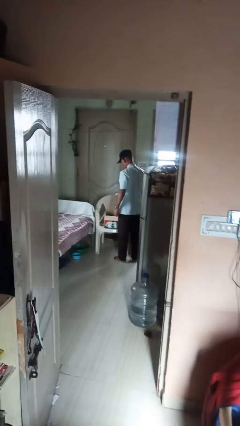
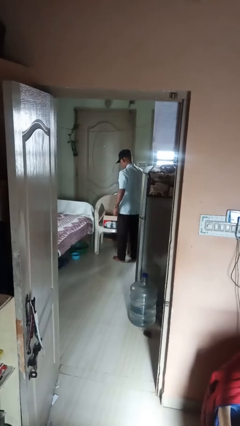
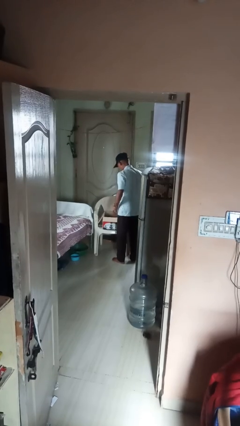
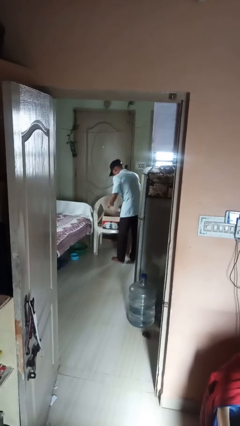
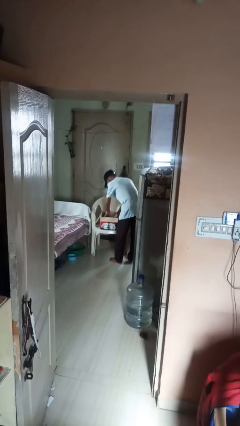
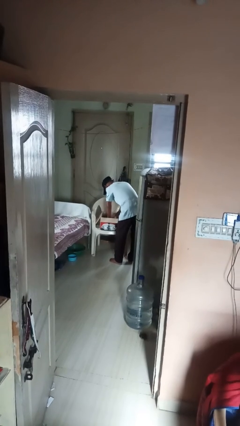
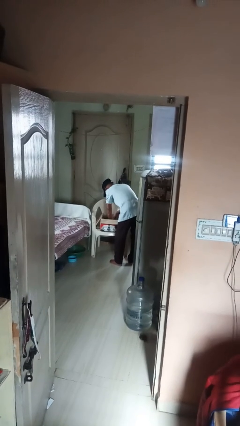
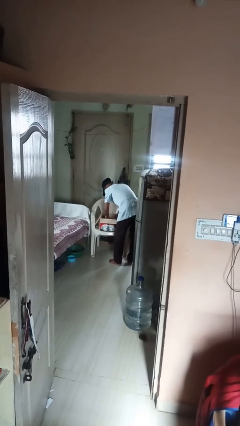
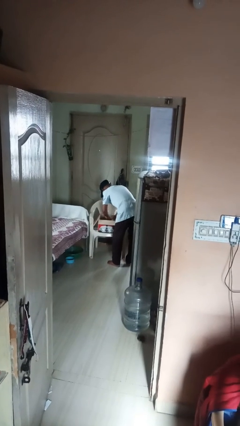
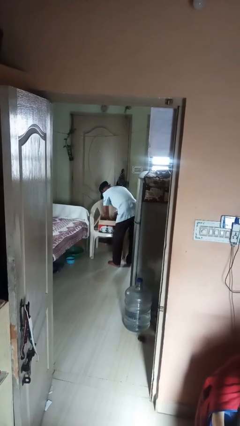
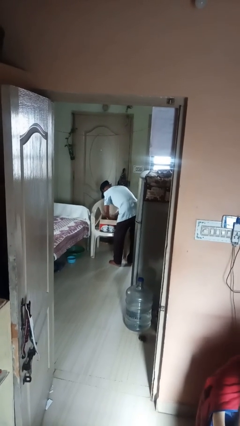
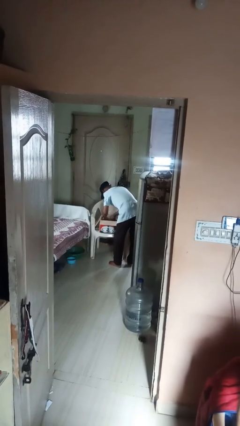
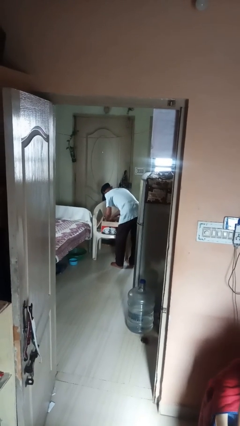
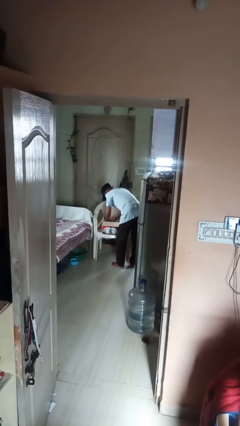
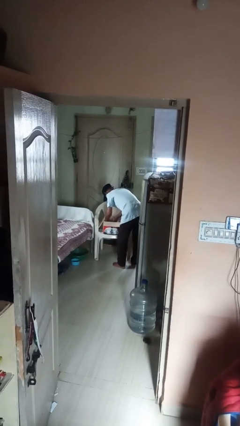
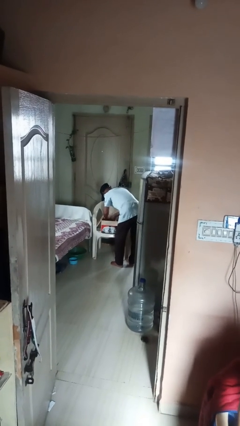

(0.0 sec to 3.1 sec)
person searches in box

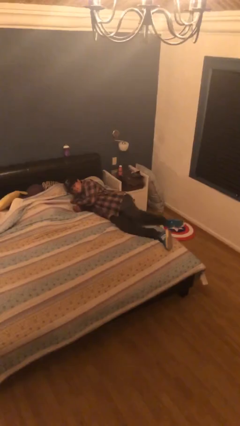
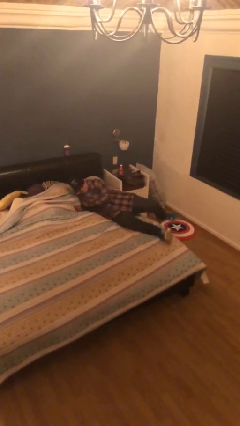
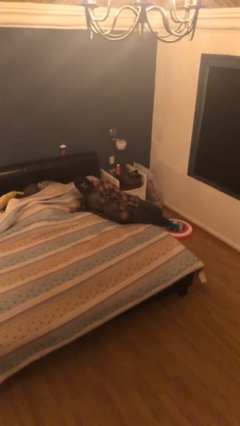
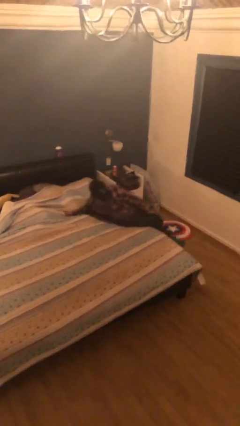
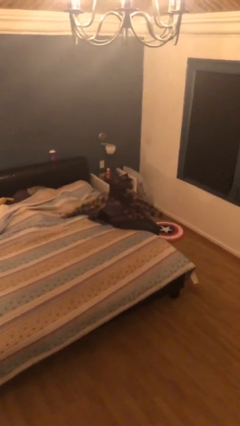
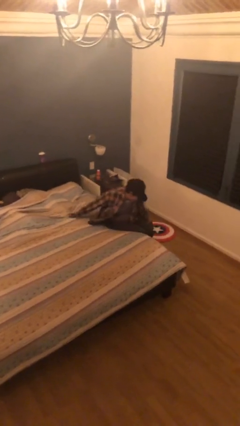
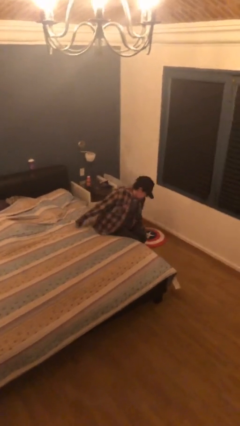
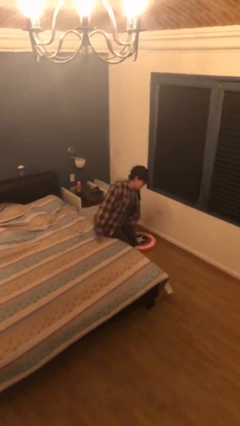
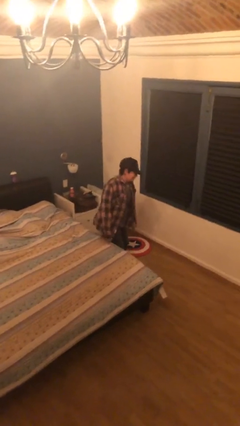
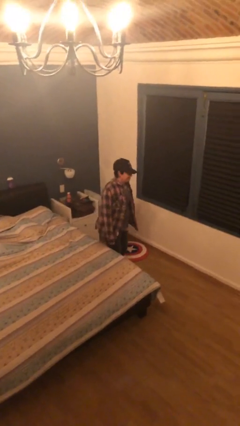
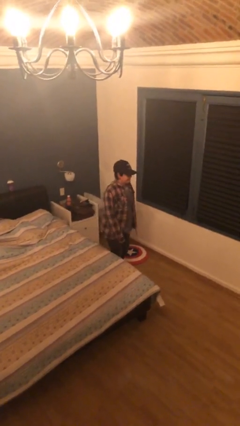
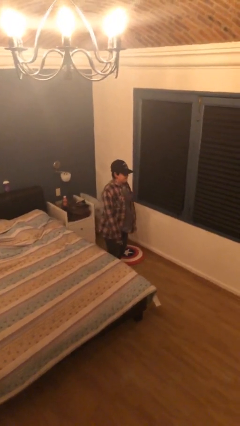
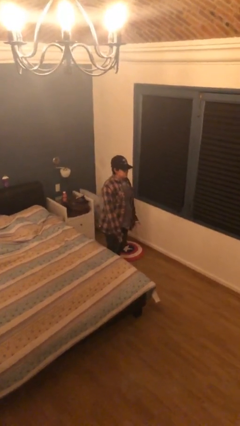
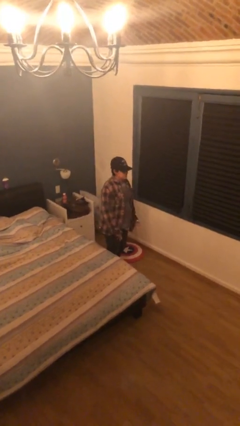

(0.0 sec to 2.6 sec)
person stands up

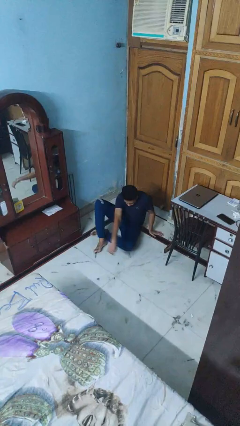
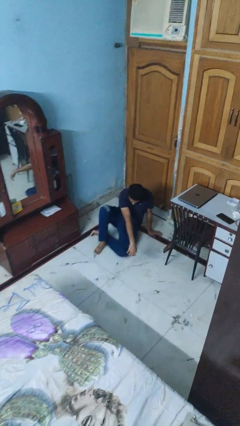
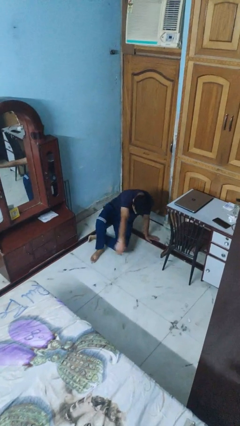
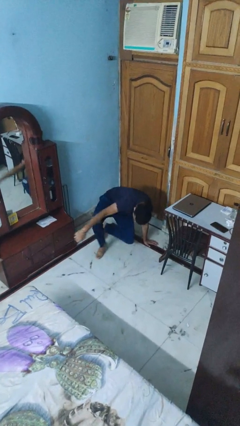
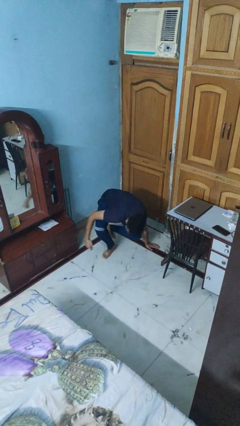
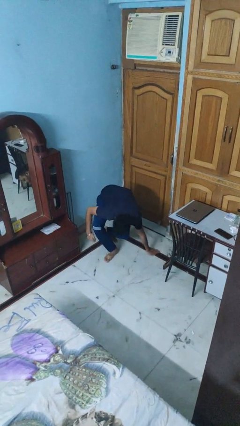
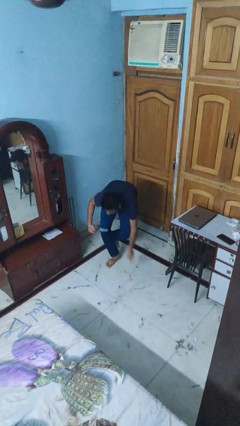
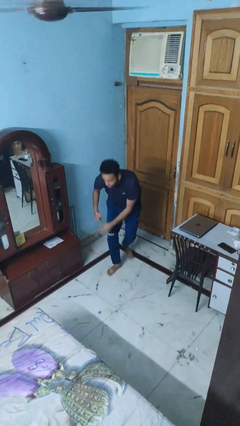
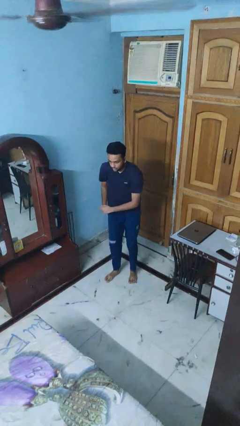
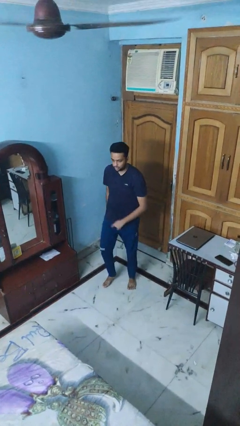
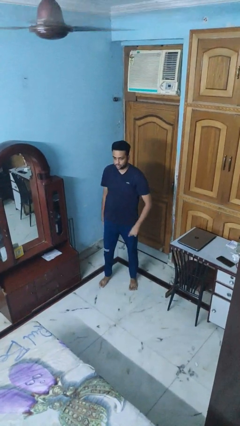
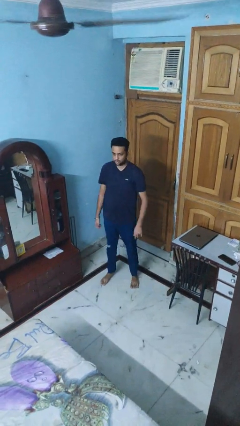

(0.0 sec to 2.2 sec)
person stands up from floor

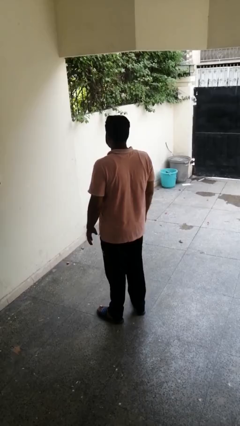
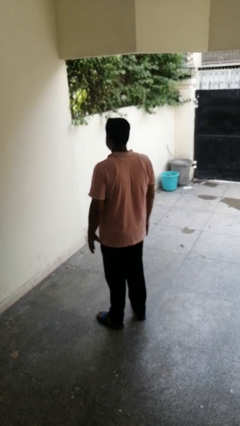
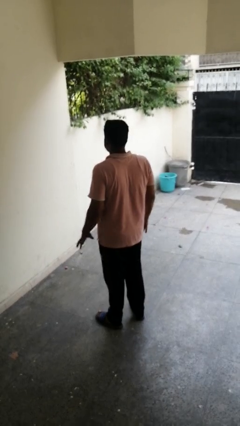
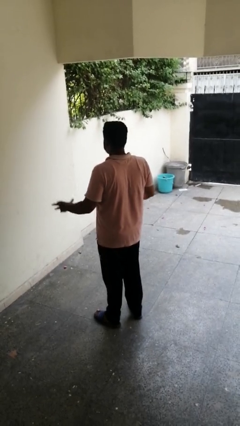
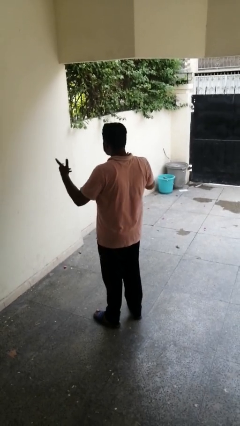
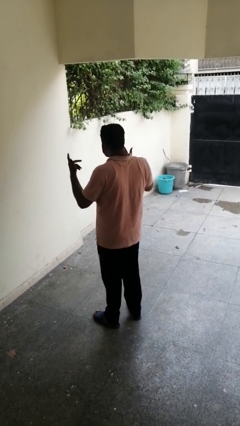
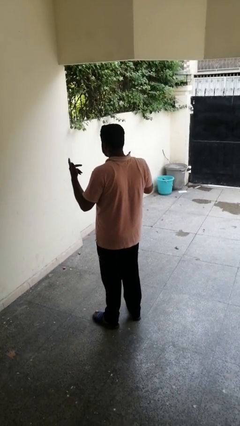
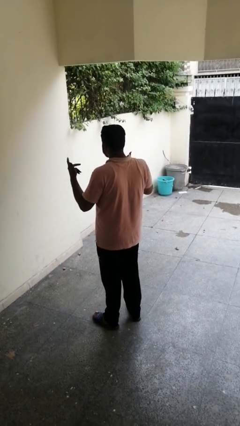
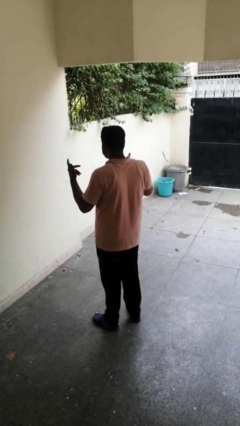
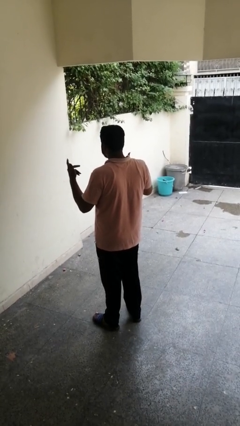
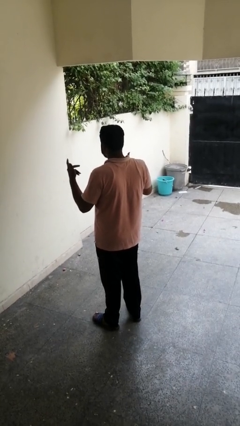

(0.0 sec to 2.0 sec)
person shrugs

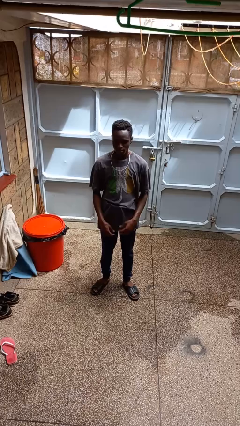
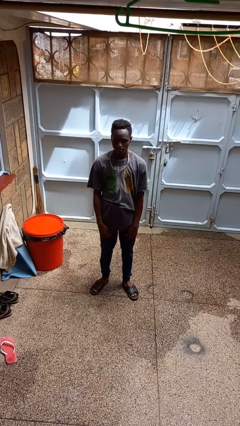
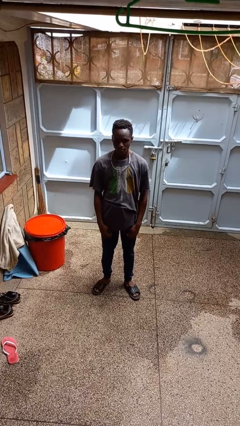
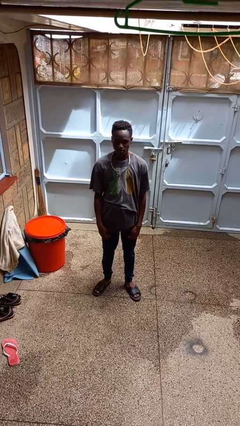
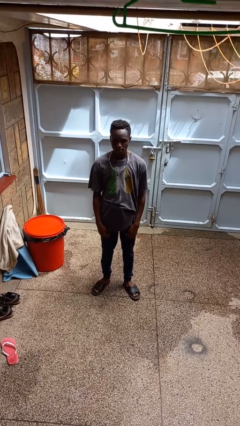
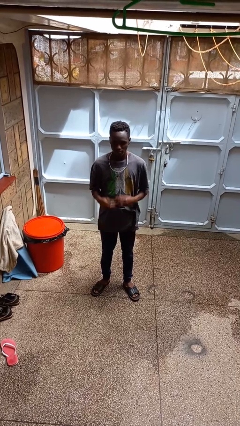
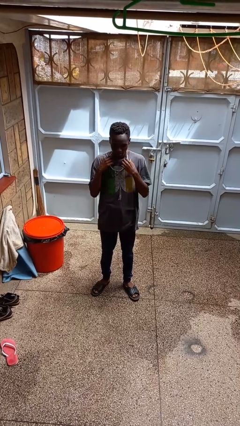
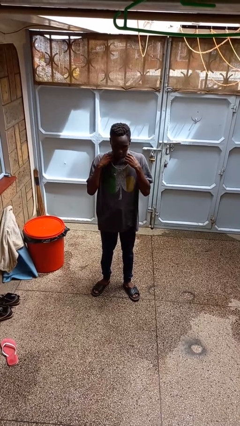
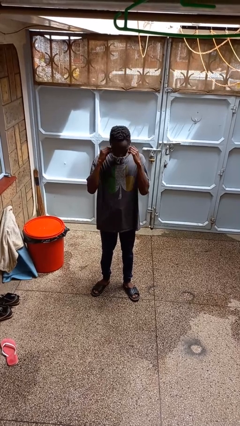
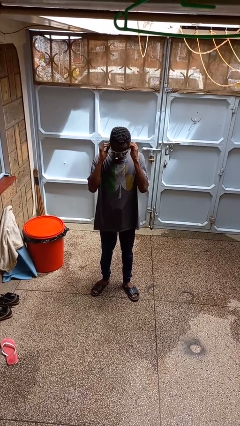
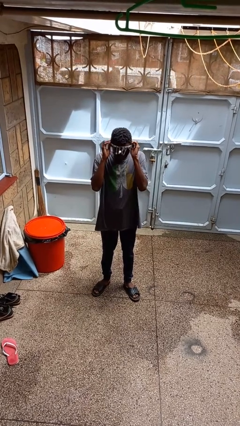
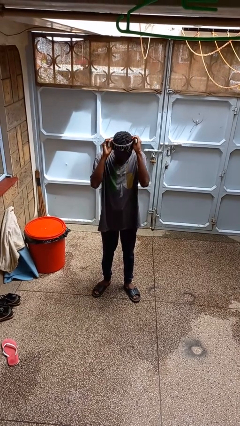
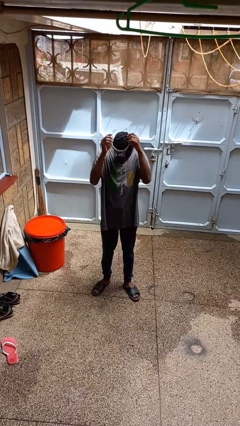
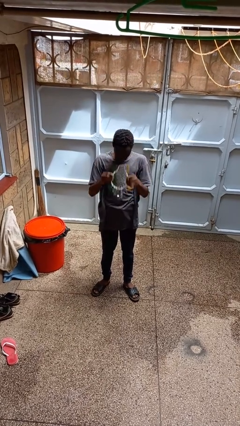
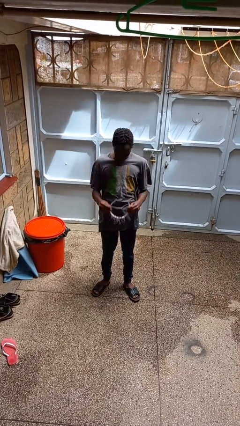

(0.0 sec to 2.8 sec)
person takes off necklace

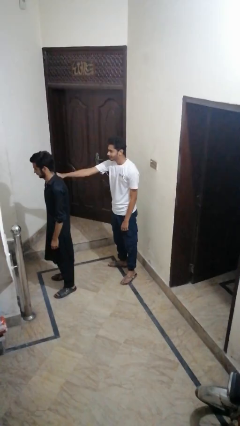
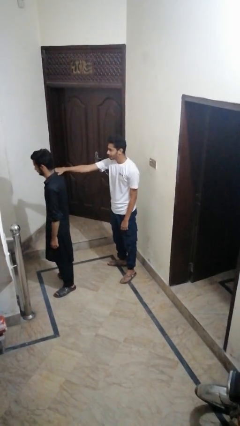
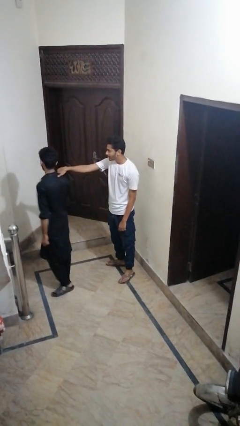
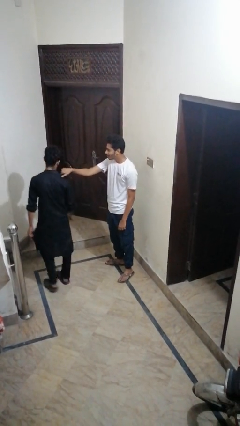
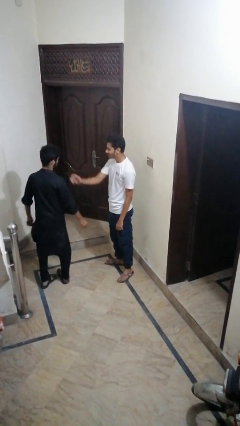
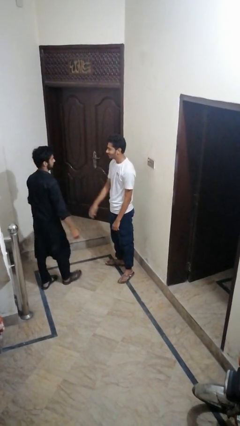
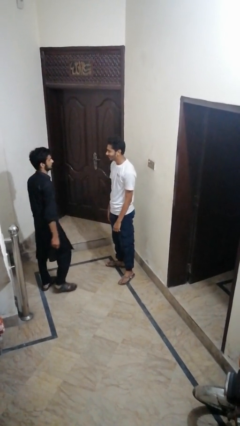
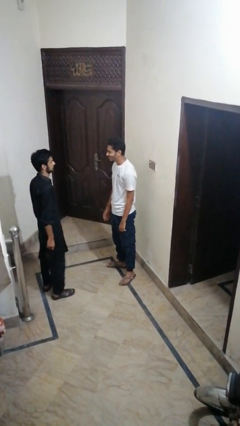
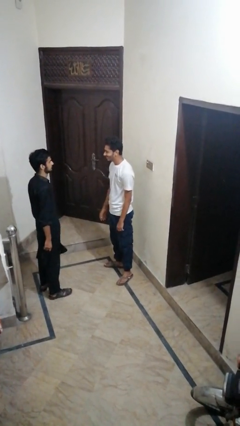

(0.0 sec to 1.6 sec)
person spins person around

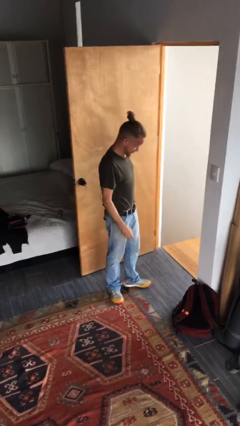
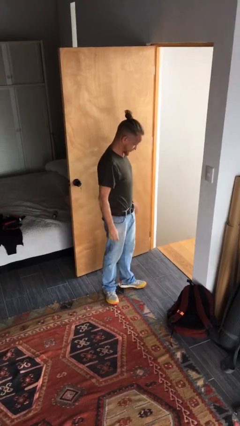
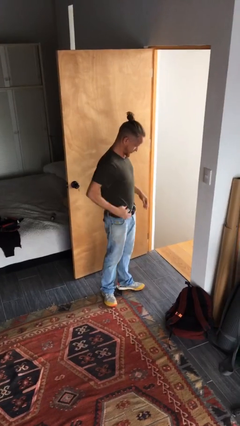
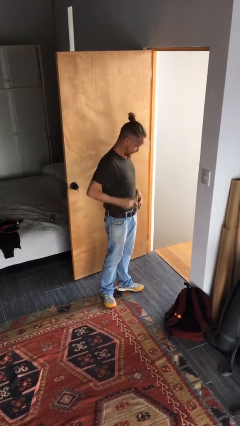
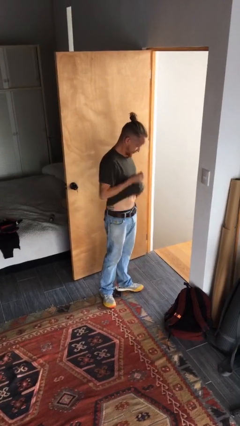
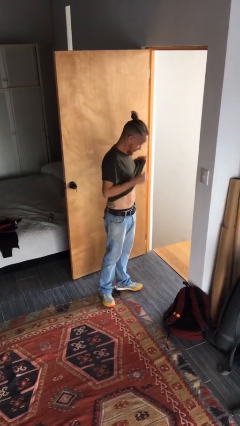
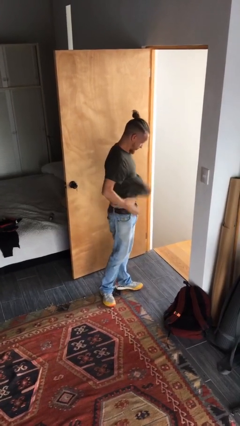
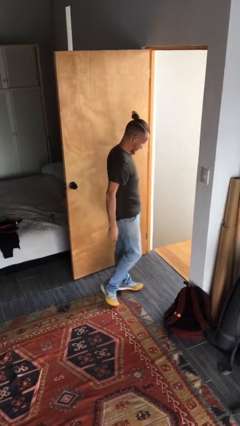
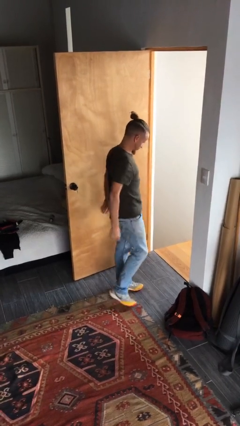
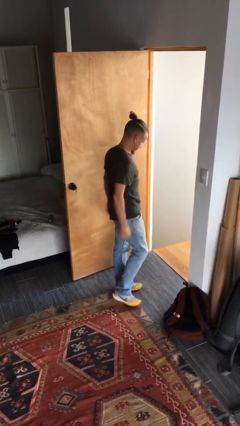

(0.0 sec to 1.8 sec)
person untucks shirt

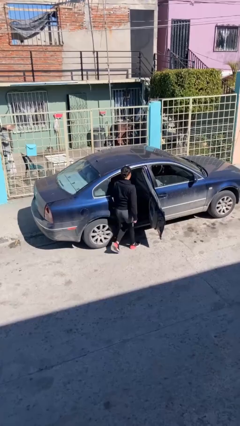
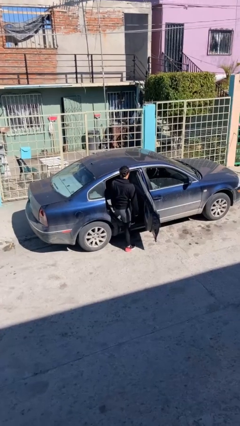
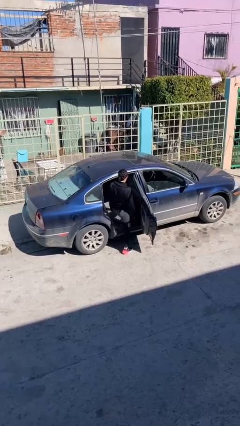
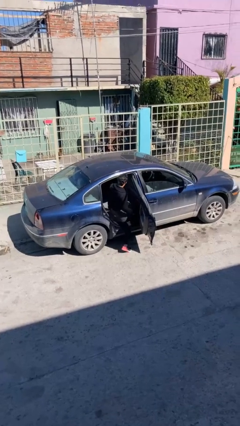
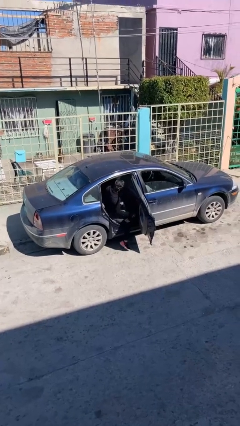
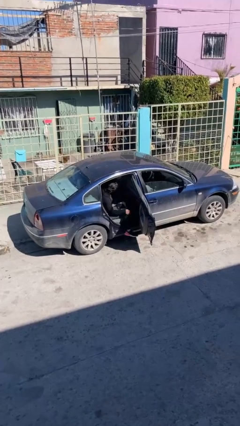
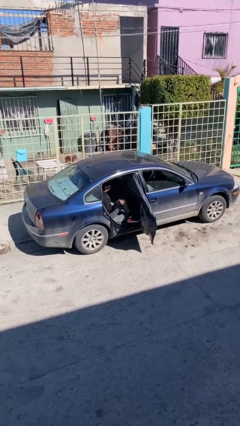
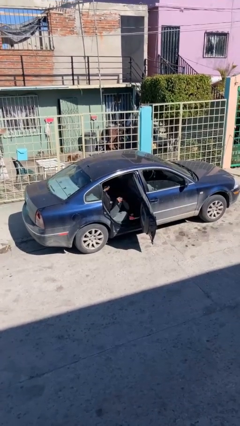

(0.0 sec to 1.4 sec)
person enters car
